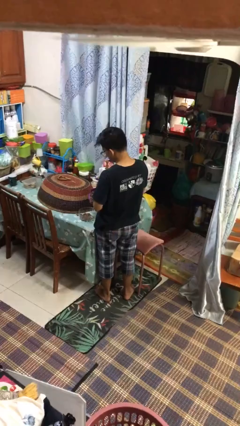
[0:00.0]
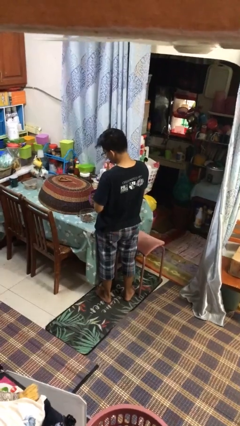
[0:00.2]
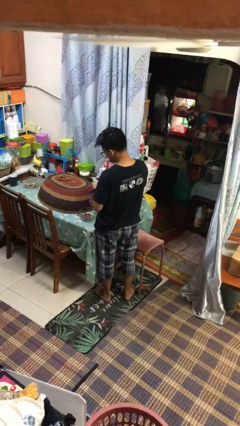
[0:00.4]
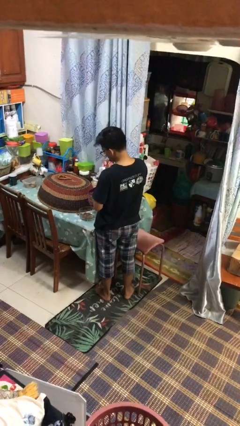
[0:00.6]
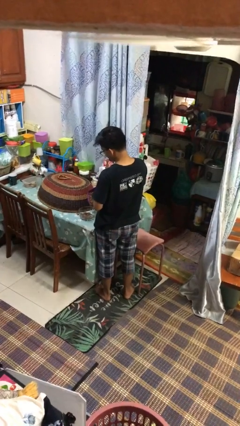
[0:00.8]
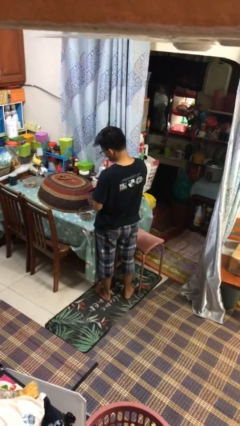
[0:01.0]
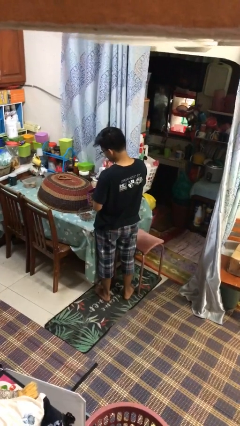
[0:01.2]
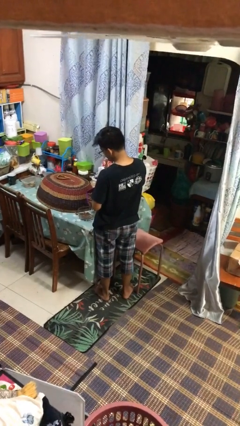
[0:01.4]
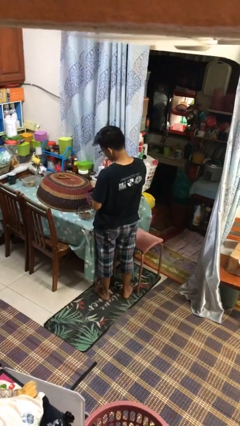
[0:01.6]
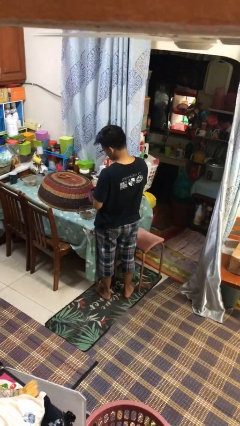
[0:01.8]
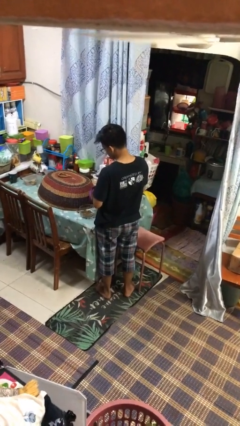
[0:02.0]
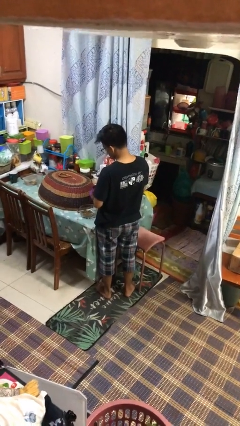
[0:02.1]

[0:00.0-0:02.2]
person pours into bowl

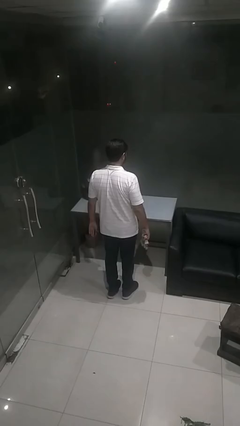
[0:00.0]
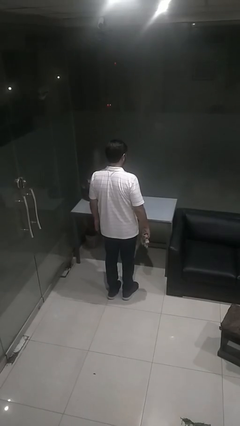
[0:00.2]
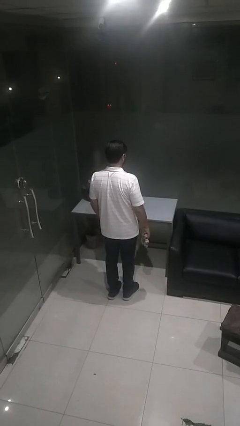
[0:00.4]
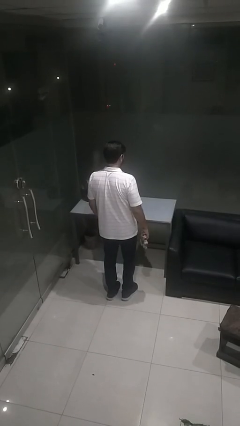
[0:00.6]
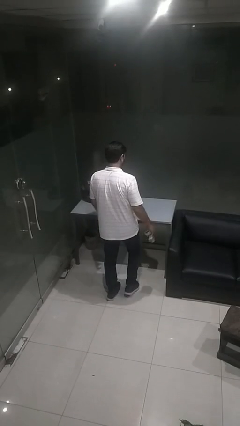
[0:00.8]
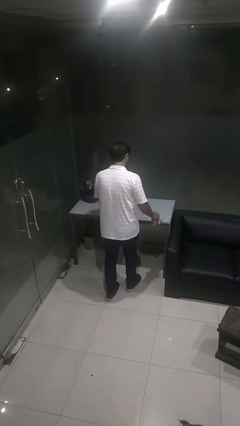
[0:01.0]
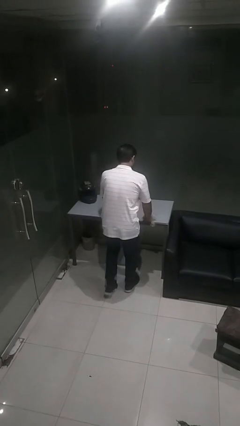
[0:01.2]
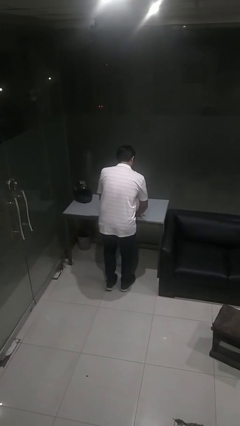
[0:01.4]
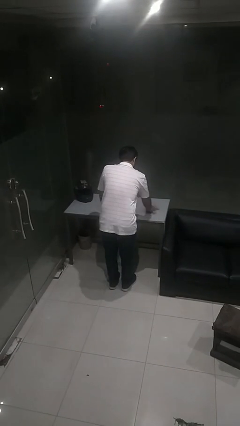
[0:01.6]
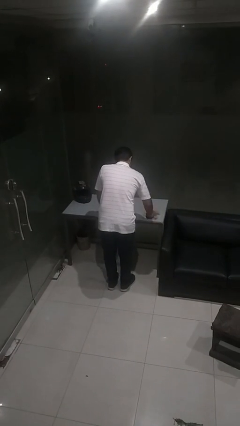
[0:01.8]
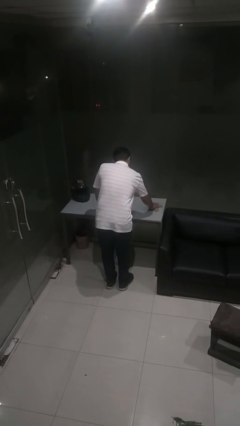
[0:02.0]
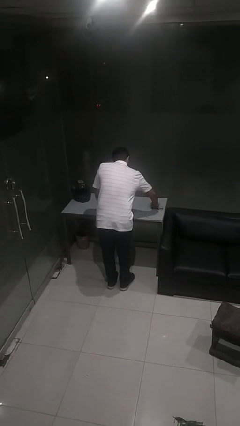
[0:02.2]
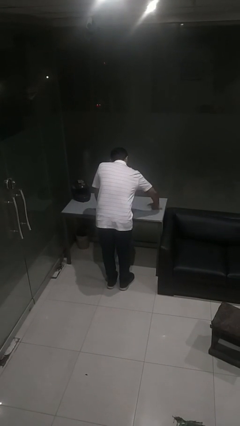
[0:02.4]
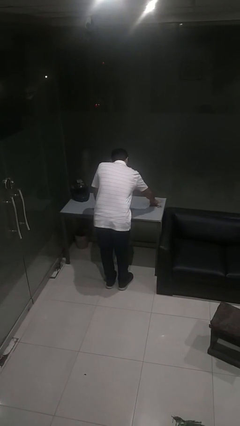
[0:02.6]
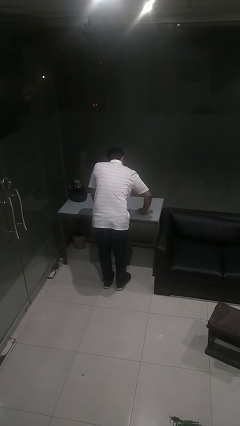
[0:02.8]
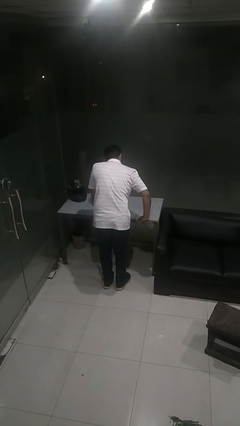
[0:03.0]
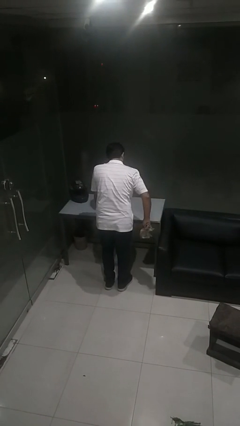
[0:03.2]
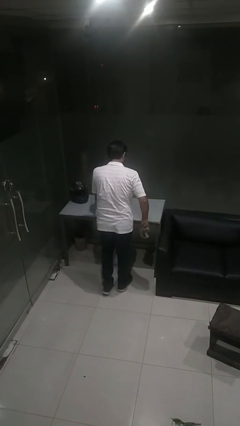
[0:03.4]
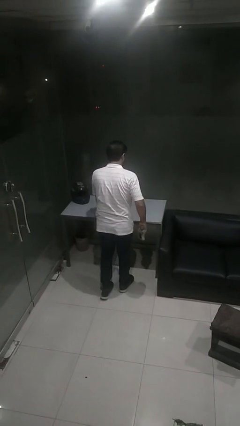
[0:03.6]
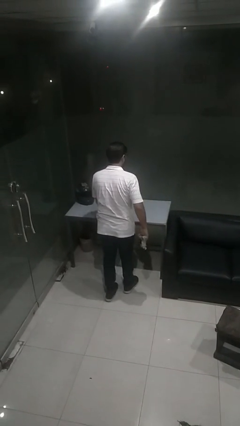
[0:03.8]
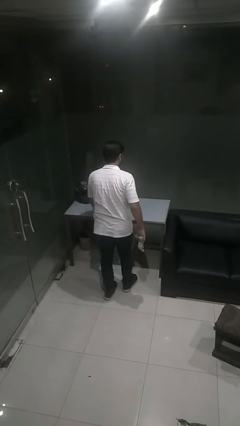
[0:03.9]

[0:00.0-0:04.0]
person cleans table with rag

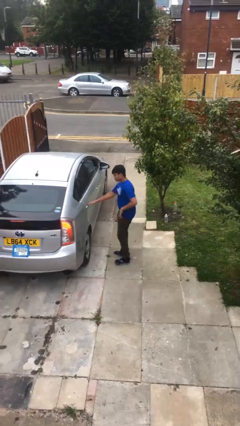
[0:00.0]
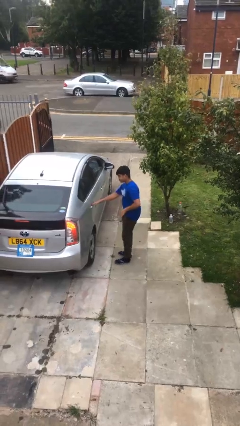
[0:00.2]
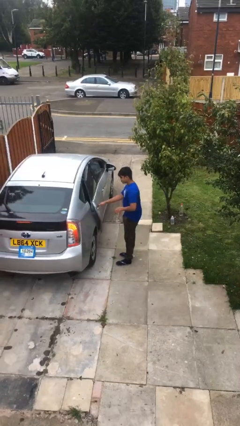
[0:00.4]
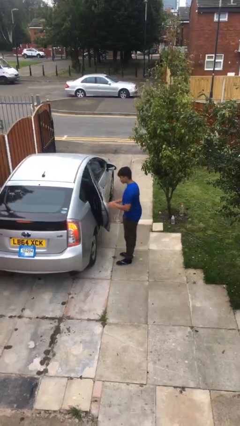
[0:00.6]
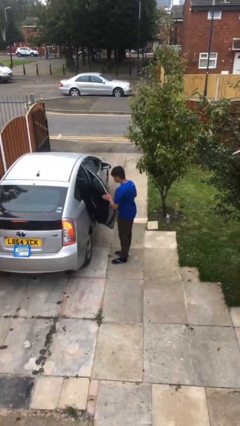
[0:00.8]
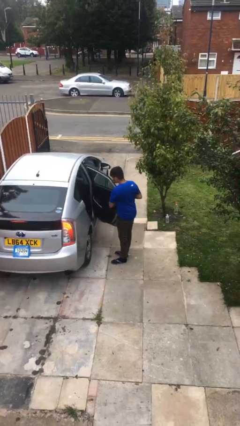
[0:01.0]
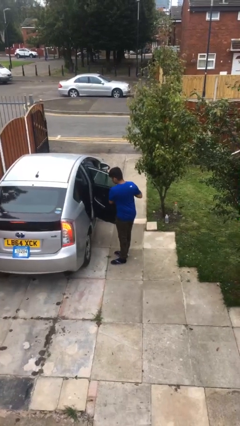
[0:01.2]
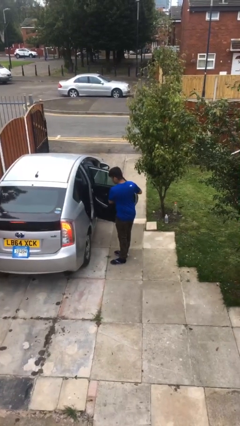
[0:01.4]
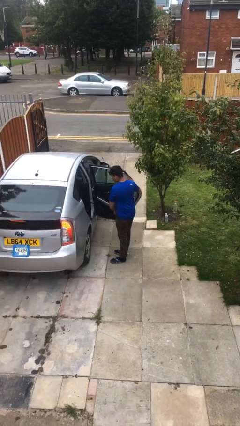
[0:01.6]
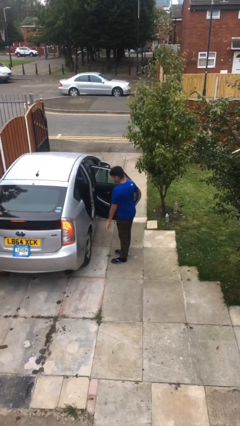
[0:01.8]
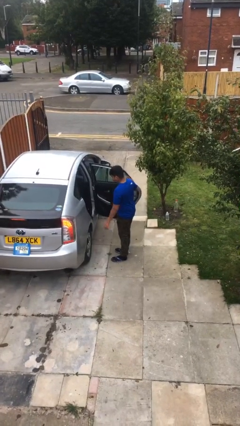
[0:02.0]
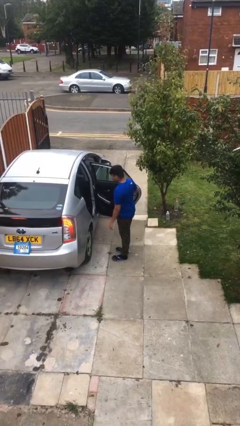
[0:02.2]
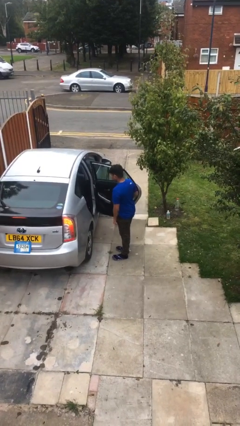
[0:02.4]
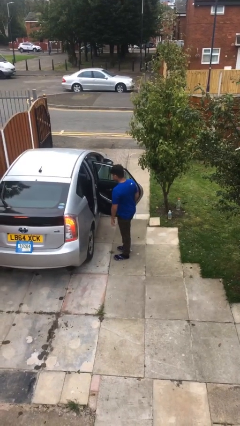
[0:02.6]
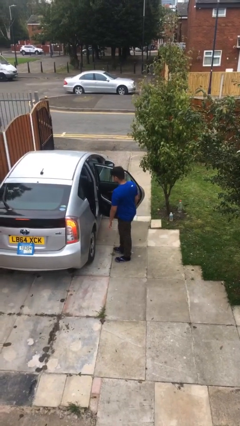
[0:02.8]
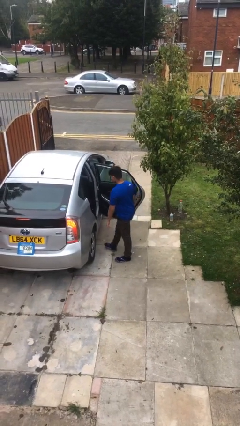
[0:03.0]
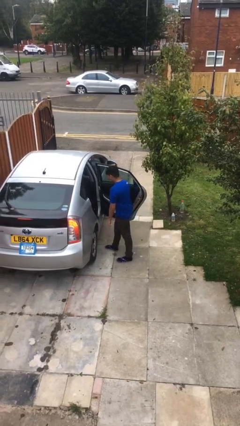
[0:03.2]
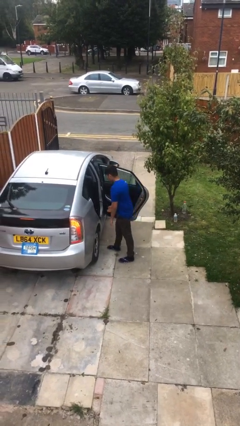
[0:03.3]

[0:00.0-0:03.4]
person opens car door

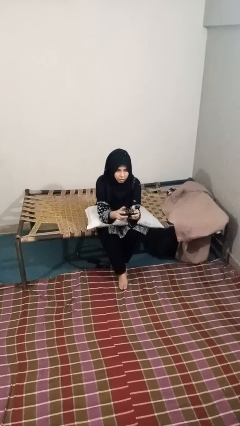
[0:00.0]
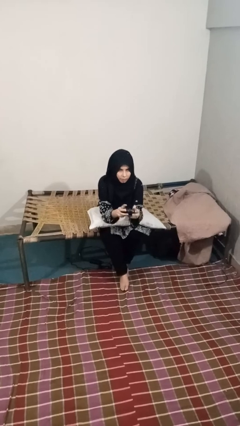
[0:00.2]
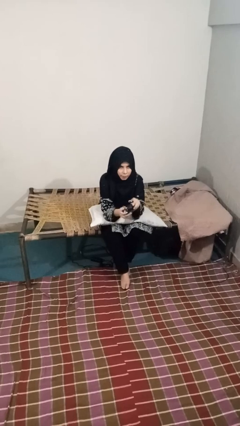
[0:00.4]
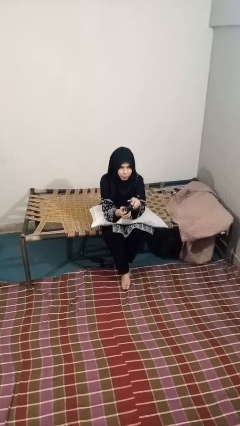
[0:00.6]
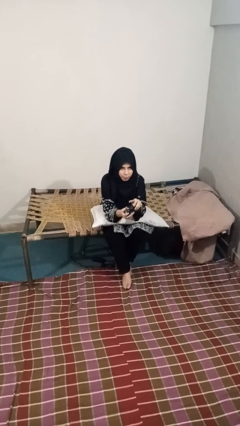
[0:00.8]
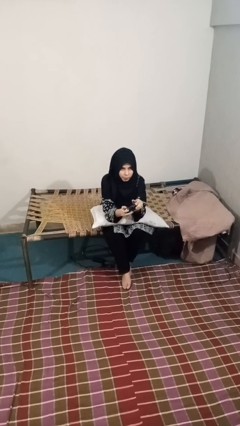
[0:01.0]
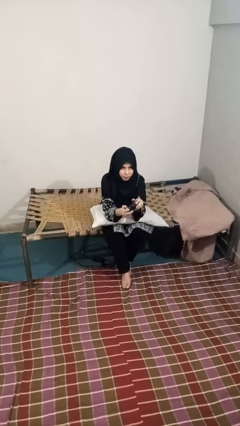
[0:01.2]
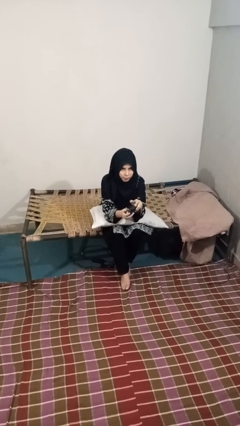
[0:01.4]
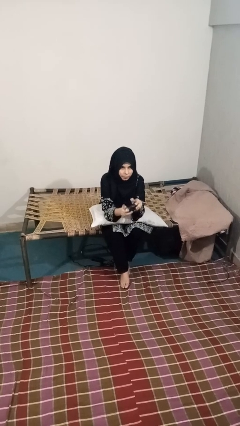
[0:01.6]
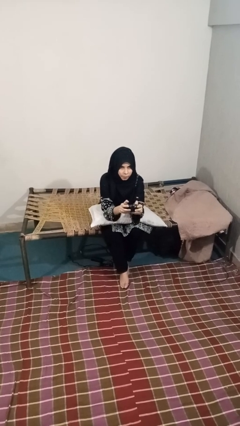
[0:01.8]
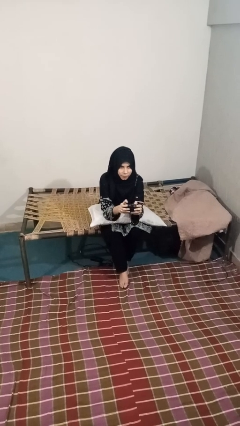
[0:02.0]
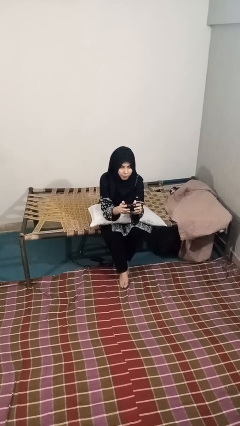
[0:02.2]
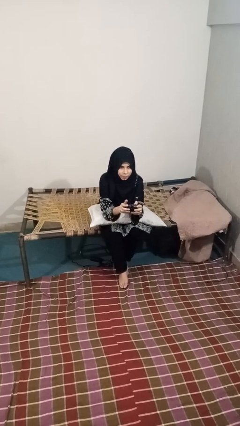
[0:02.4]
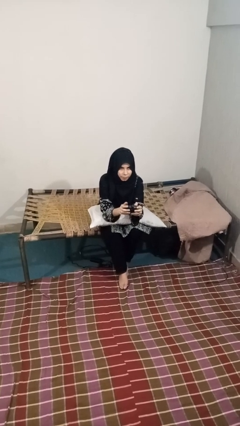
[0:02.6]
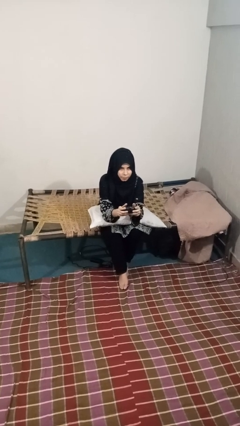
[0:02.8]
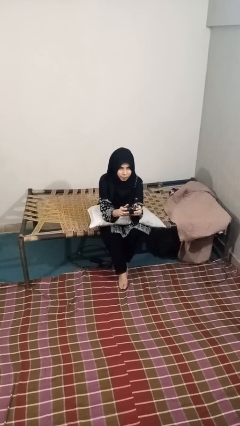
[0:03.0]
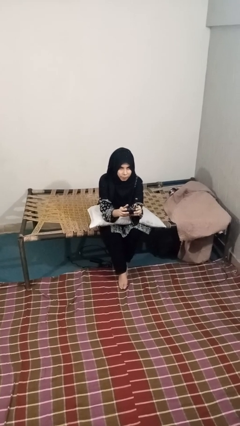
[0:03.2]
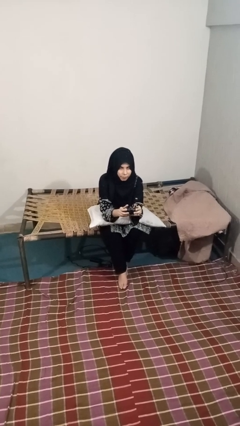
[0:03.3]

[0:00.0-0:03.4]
person interacts with handheld game

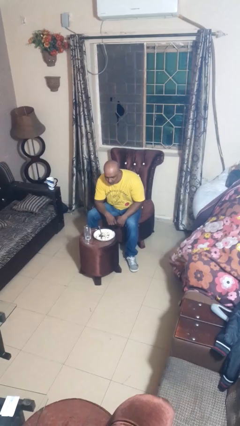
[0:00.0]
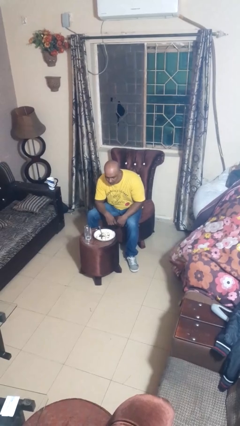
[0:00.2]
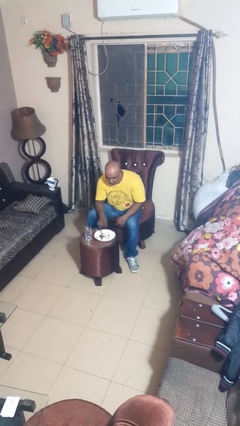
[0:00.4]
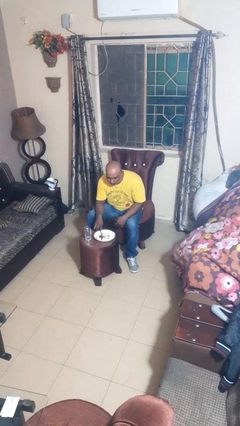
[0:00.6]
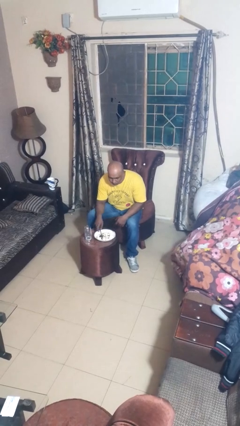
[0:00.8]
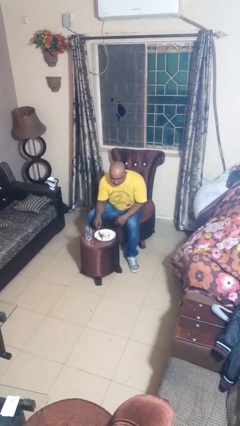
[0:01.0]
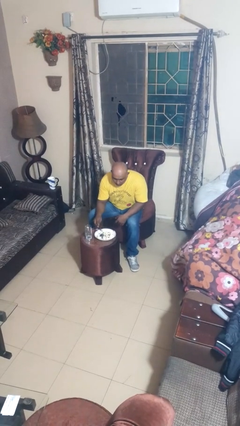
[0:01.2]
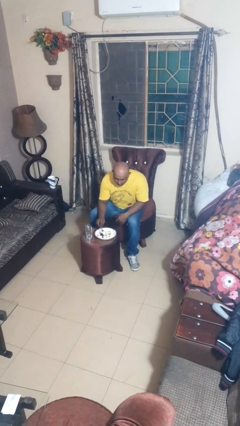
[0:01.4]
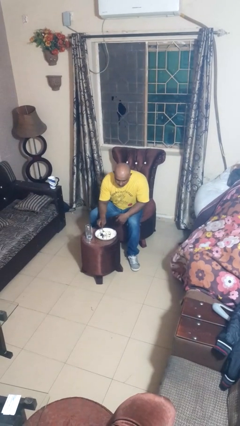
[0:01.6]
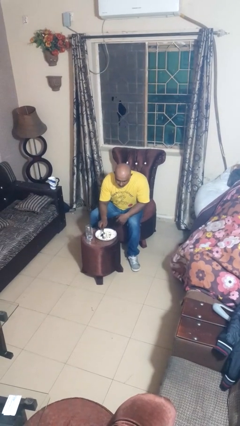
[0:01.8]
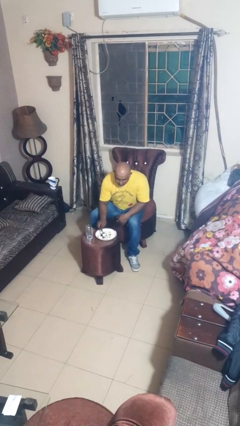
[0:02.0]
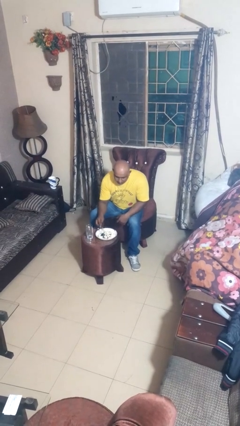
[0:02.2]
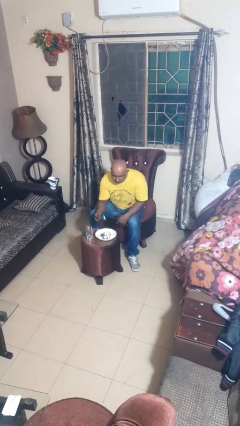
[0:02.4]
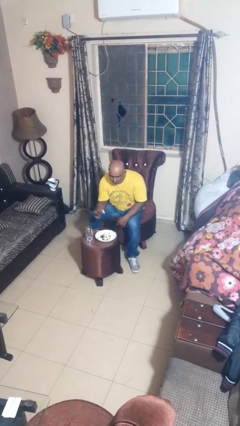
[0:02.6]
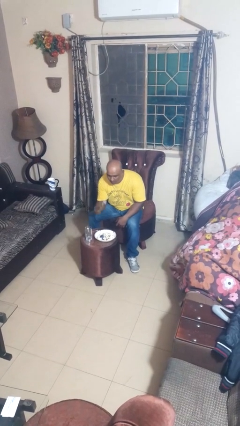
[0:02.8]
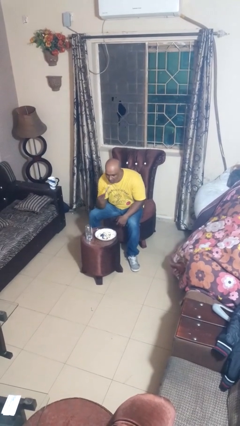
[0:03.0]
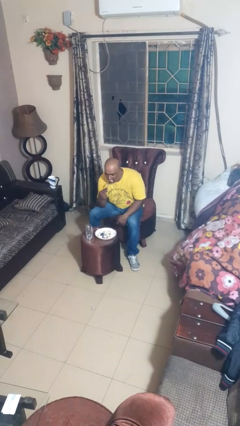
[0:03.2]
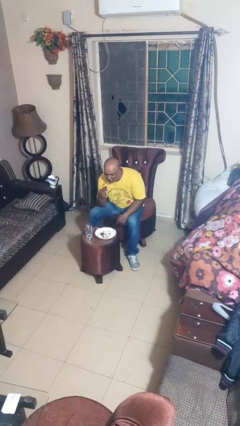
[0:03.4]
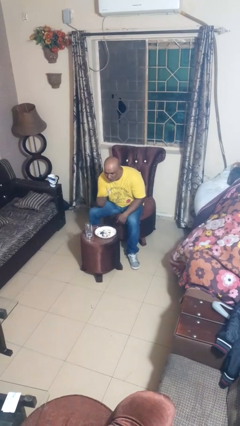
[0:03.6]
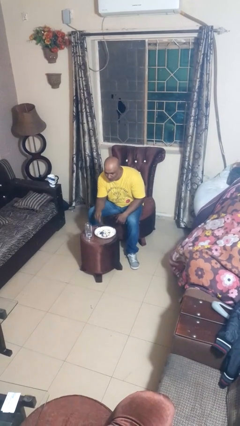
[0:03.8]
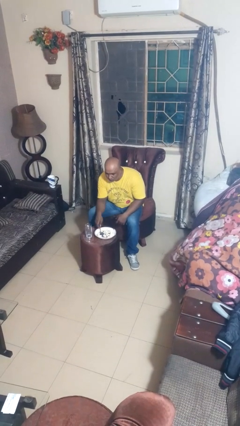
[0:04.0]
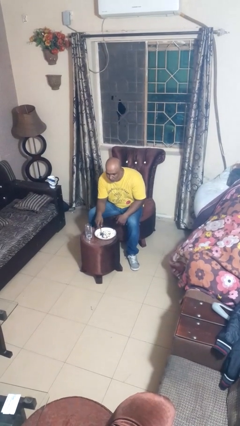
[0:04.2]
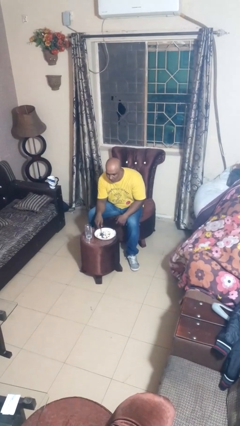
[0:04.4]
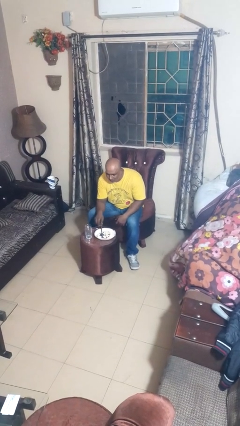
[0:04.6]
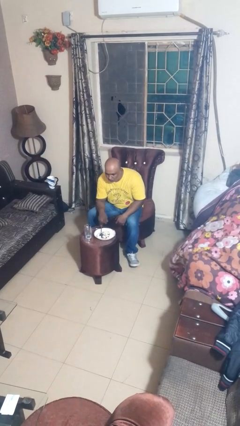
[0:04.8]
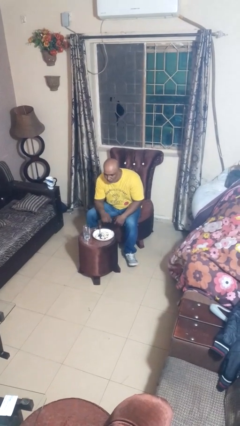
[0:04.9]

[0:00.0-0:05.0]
person eats with utensil
